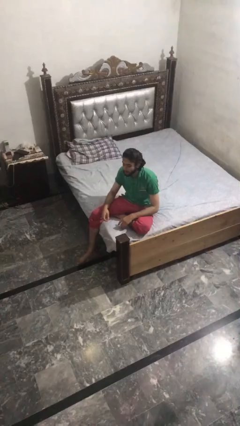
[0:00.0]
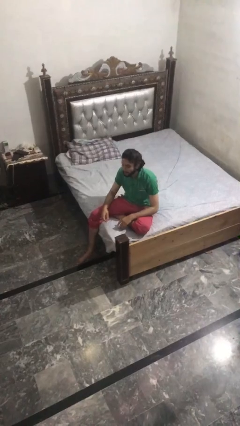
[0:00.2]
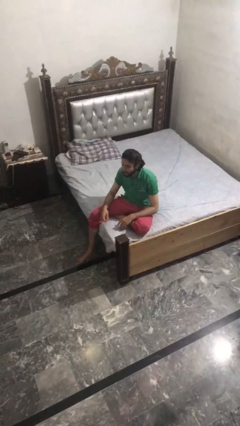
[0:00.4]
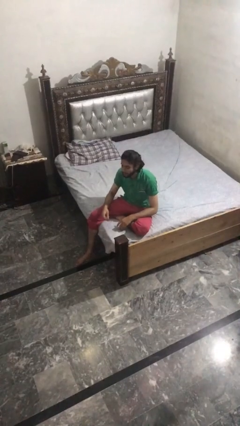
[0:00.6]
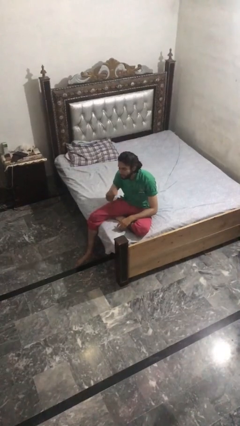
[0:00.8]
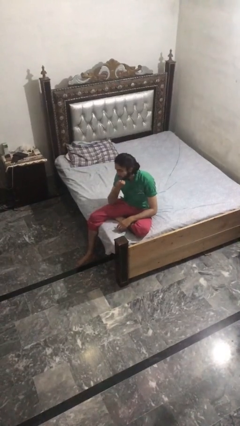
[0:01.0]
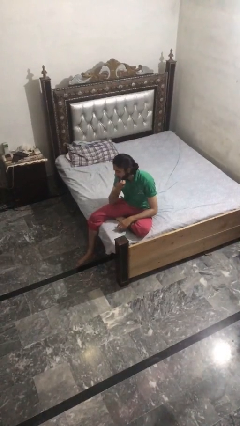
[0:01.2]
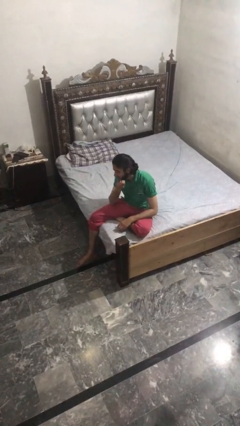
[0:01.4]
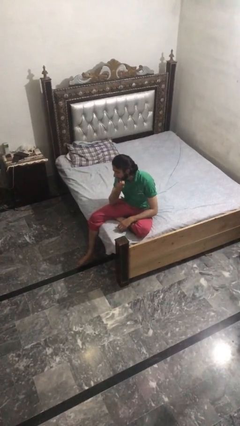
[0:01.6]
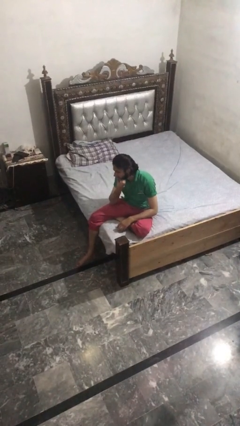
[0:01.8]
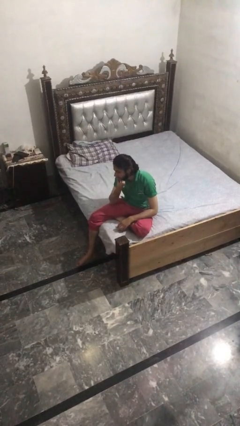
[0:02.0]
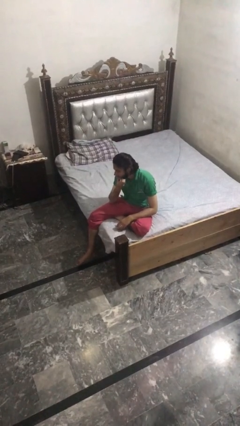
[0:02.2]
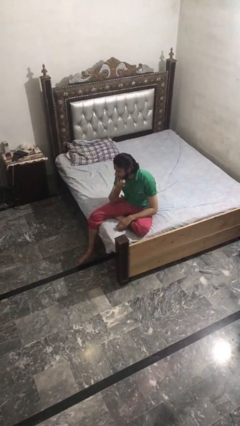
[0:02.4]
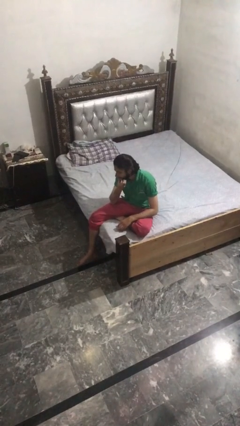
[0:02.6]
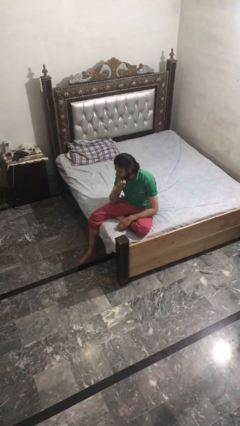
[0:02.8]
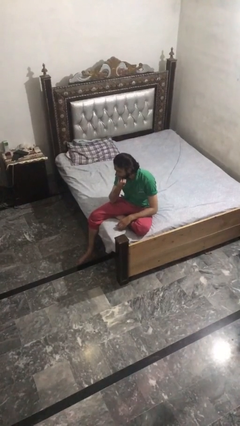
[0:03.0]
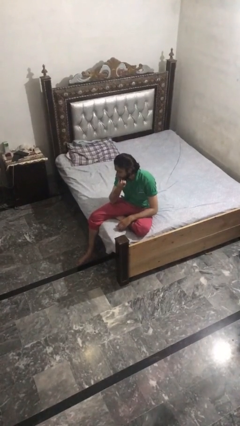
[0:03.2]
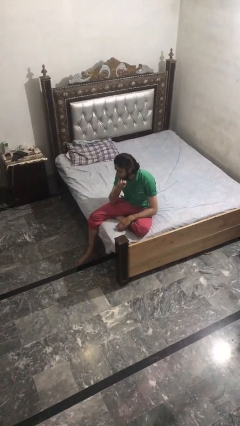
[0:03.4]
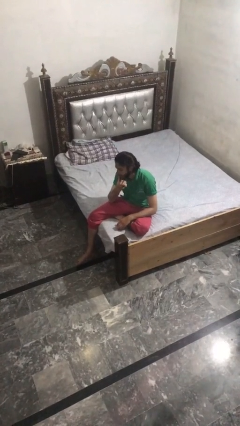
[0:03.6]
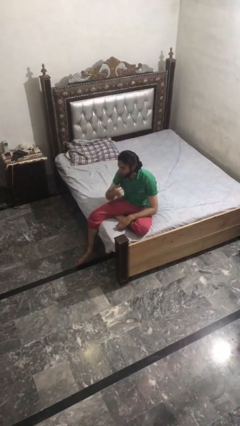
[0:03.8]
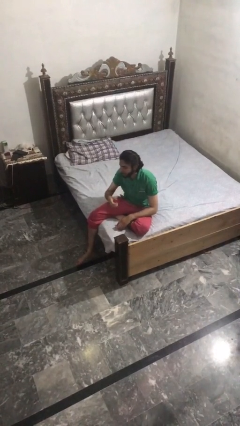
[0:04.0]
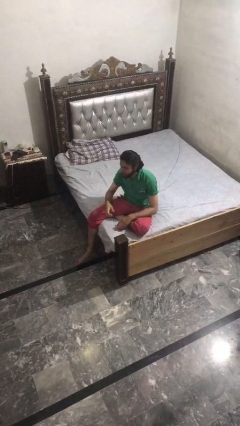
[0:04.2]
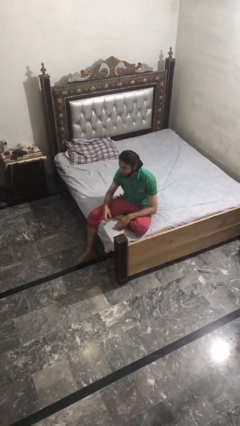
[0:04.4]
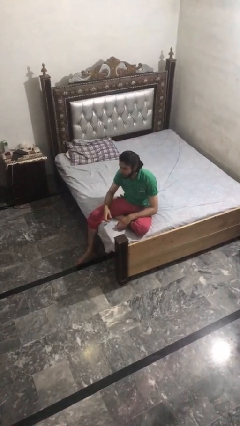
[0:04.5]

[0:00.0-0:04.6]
person scratches face

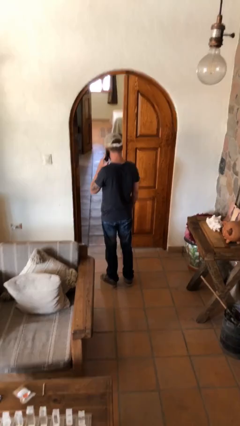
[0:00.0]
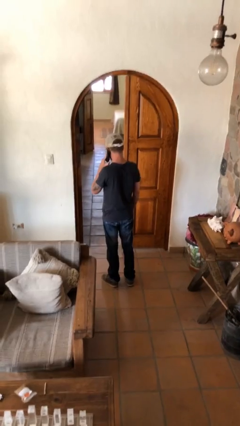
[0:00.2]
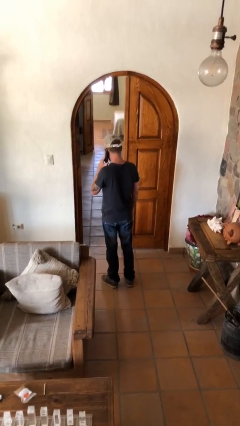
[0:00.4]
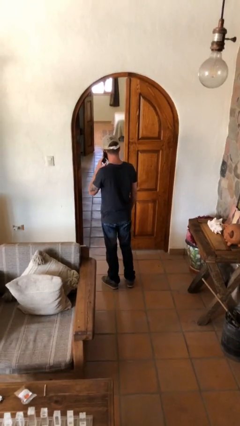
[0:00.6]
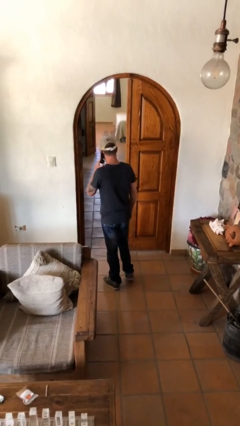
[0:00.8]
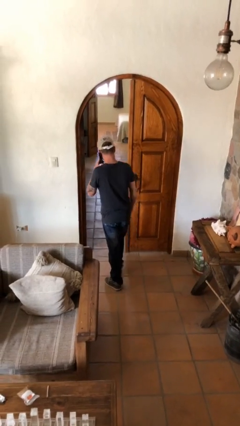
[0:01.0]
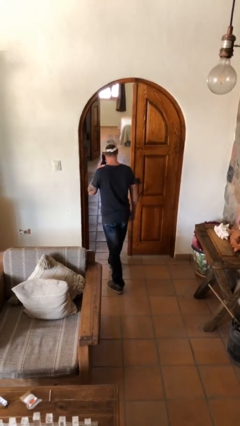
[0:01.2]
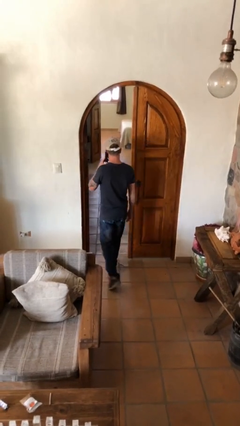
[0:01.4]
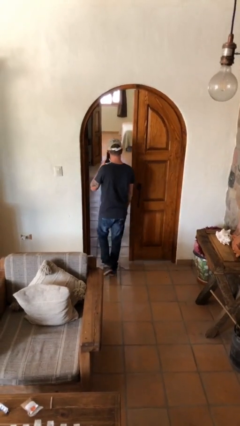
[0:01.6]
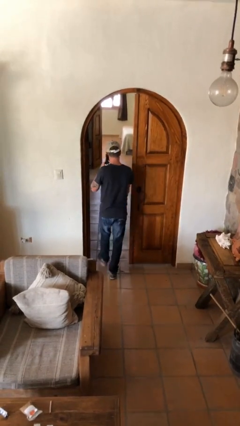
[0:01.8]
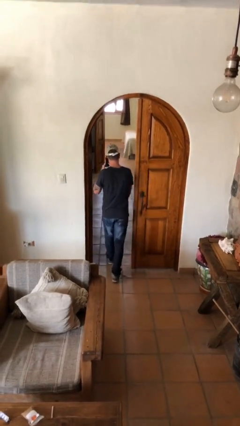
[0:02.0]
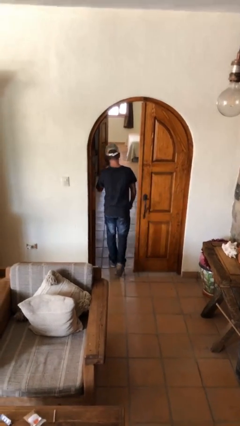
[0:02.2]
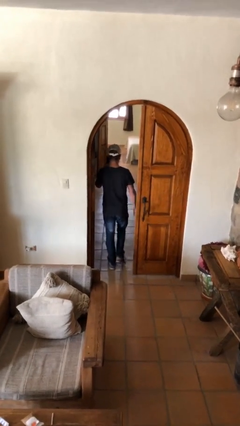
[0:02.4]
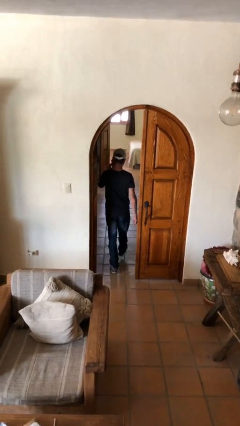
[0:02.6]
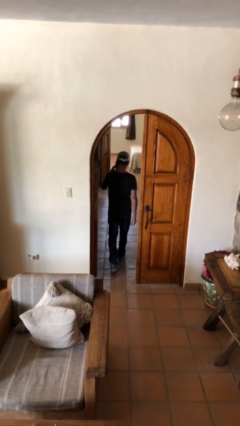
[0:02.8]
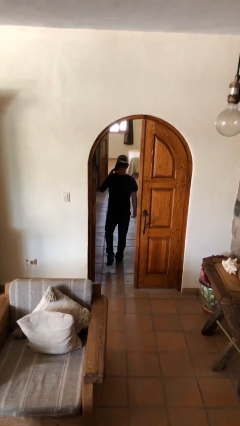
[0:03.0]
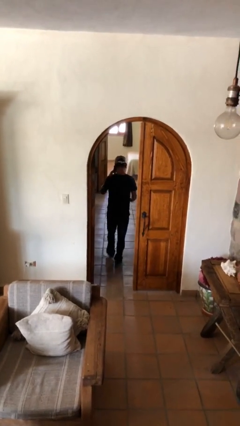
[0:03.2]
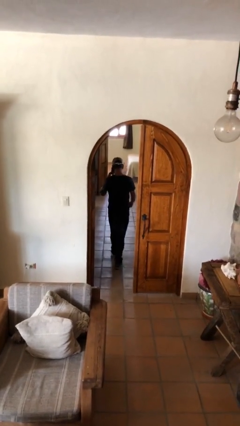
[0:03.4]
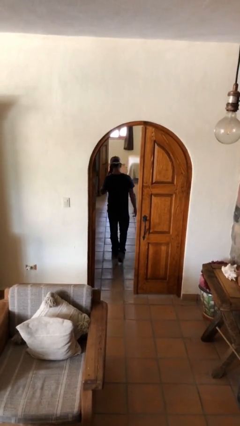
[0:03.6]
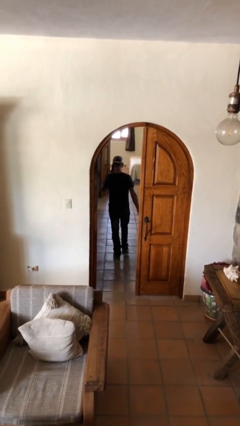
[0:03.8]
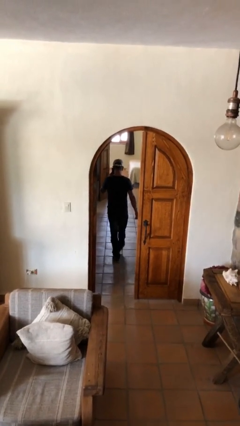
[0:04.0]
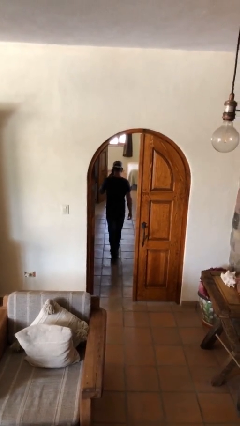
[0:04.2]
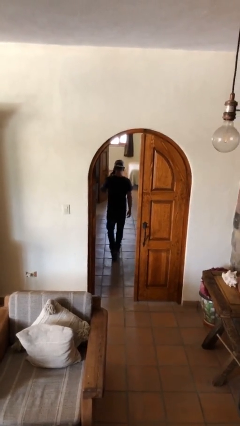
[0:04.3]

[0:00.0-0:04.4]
person exits scene through structure

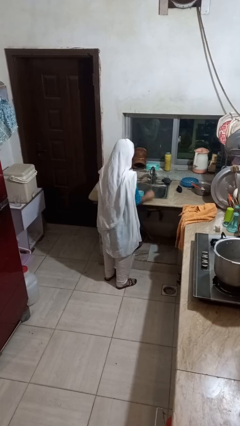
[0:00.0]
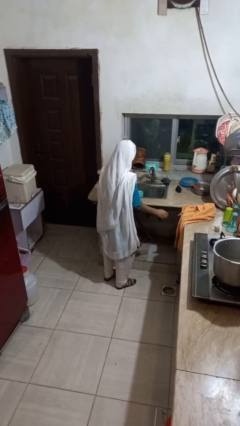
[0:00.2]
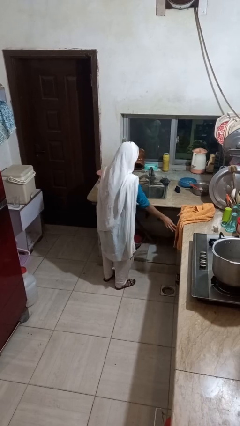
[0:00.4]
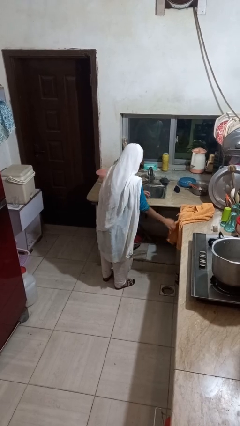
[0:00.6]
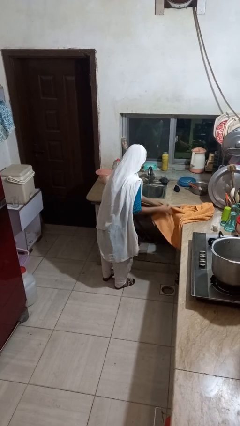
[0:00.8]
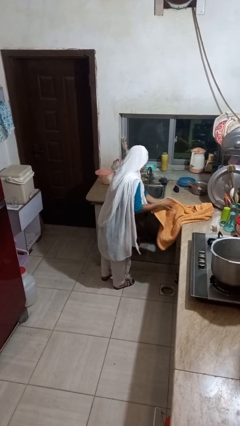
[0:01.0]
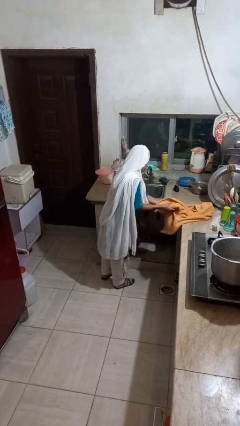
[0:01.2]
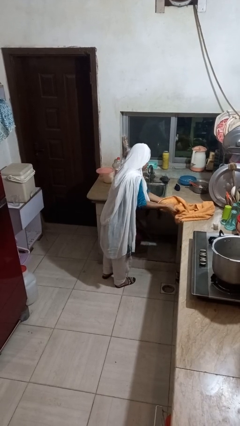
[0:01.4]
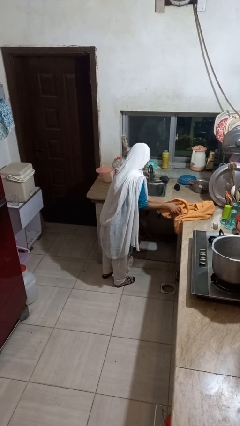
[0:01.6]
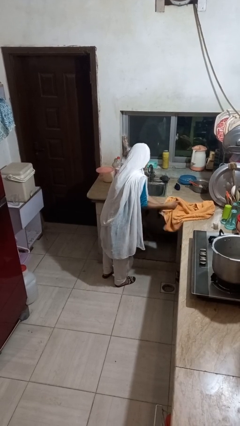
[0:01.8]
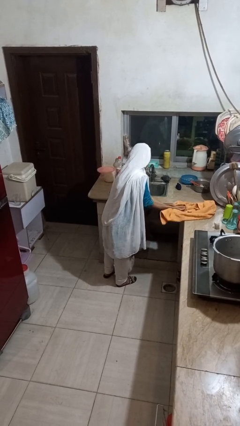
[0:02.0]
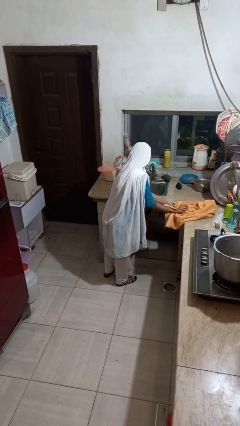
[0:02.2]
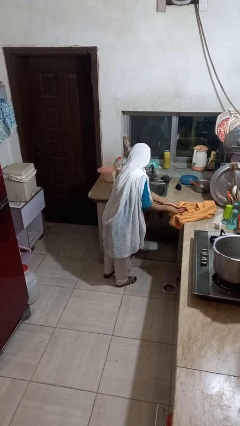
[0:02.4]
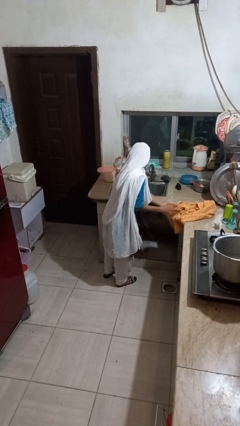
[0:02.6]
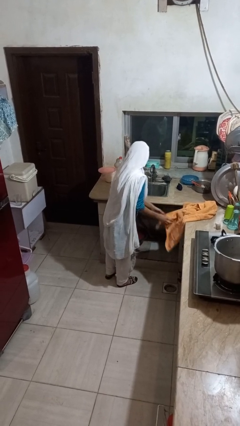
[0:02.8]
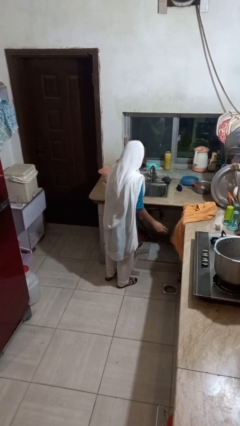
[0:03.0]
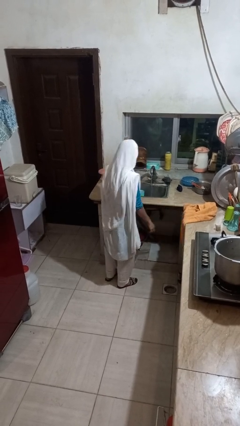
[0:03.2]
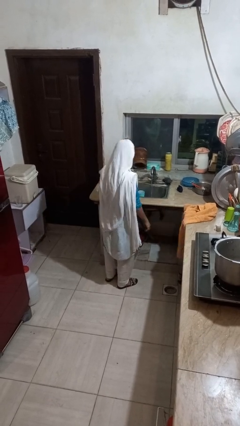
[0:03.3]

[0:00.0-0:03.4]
person dries hands with towel

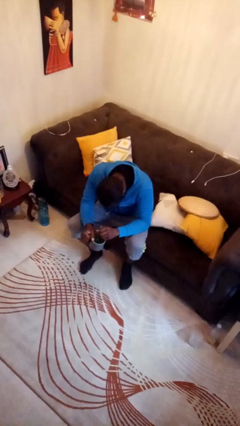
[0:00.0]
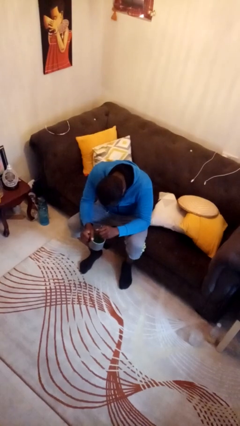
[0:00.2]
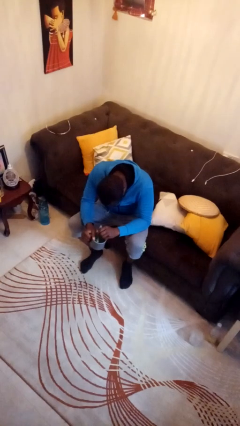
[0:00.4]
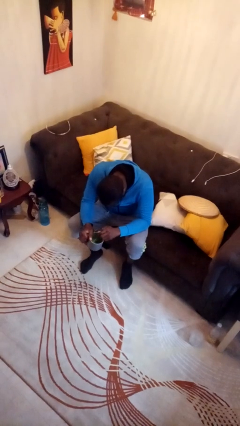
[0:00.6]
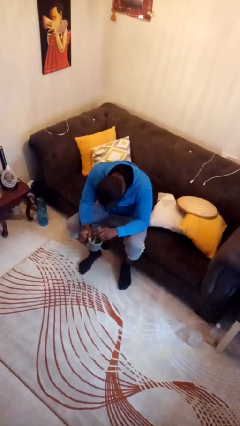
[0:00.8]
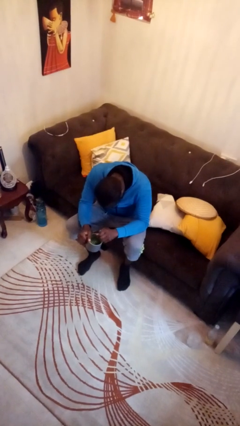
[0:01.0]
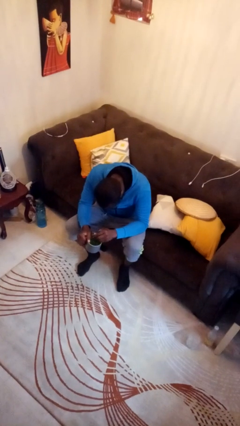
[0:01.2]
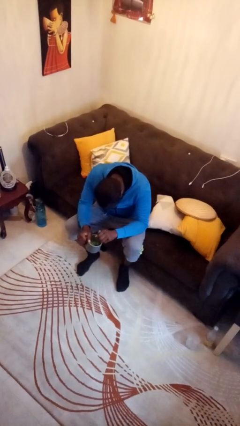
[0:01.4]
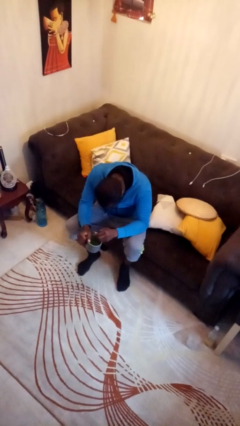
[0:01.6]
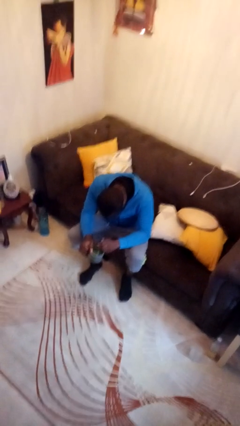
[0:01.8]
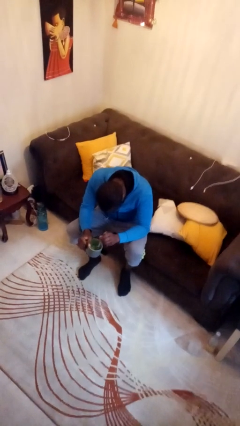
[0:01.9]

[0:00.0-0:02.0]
person stirs mug

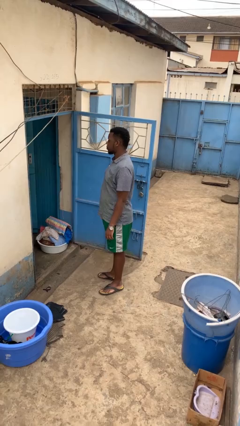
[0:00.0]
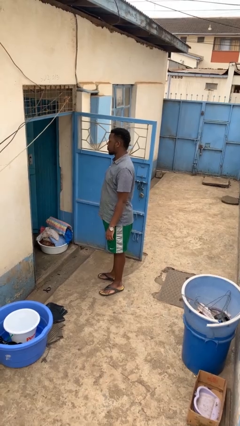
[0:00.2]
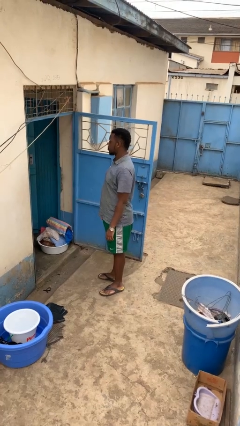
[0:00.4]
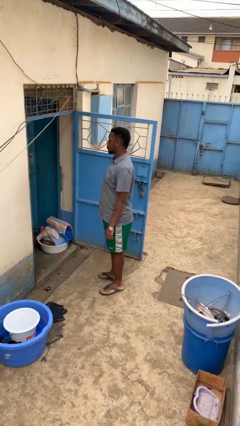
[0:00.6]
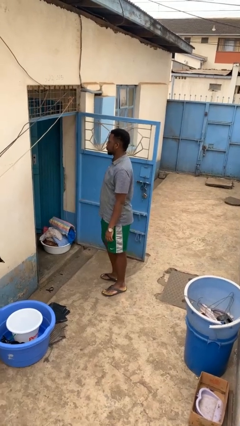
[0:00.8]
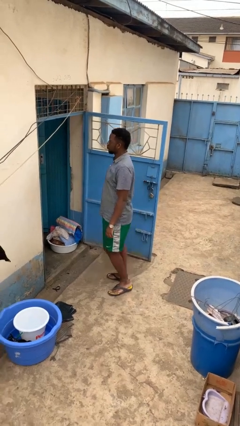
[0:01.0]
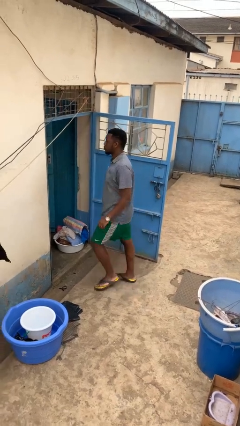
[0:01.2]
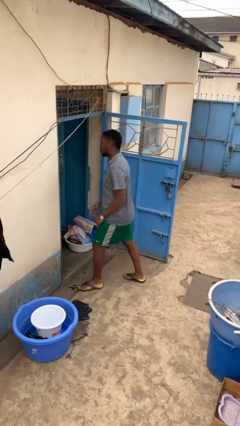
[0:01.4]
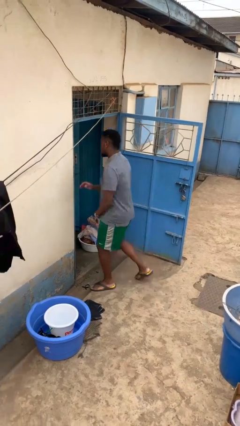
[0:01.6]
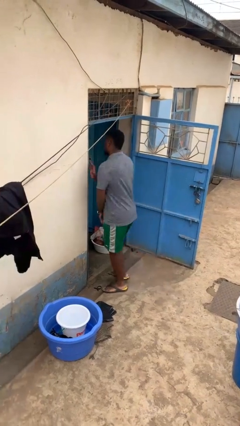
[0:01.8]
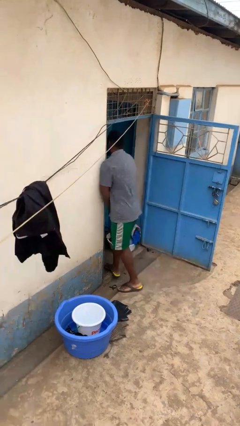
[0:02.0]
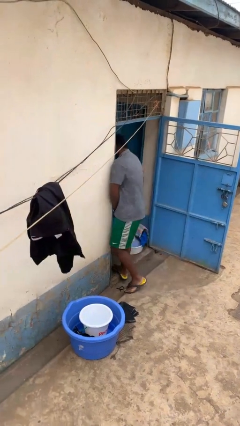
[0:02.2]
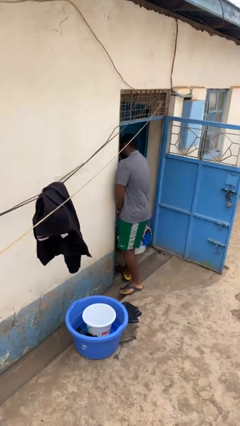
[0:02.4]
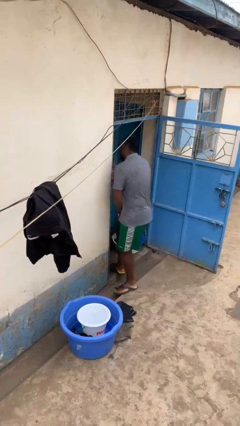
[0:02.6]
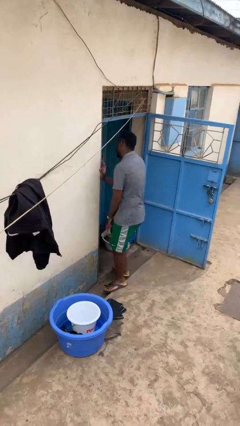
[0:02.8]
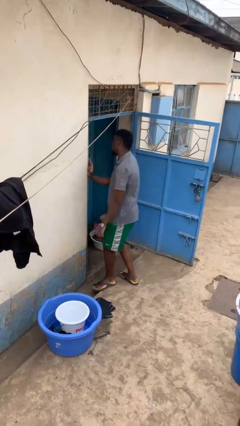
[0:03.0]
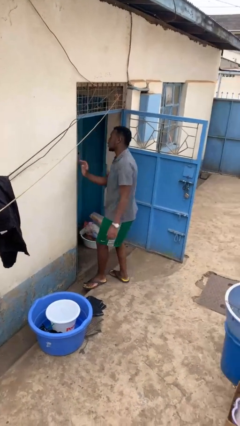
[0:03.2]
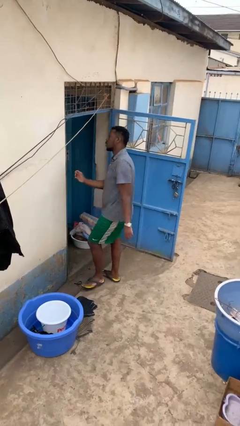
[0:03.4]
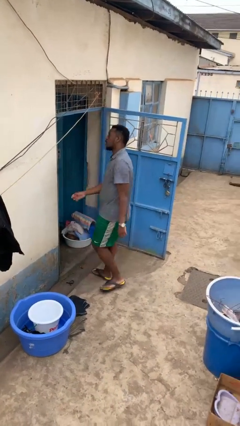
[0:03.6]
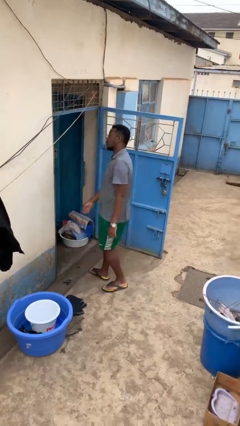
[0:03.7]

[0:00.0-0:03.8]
person bumps into wall
